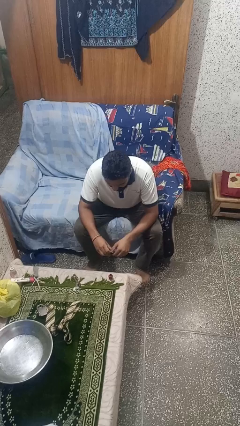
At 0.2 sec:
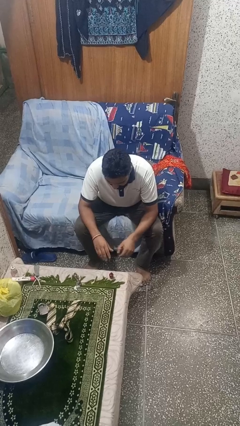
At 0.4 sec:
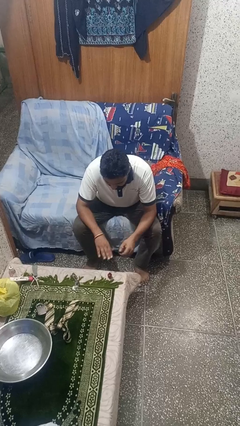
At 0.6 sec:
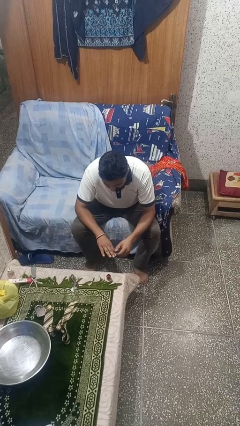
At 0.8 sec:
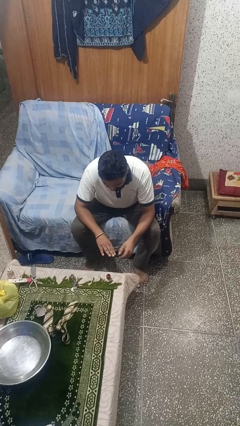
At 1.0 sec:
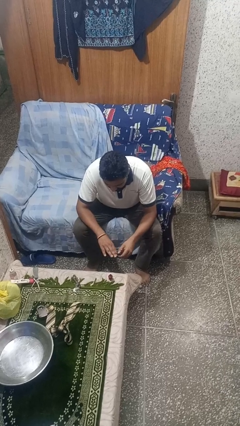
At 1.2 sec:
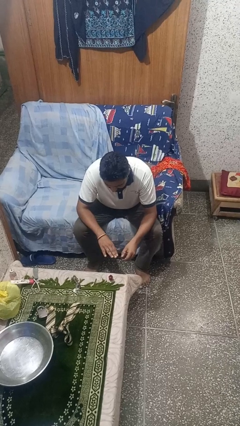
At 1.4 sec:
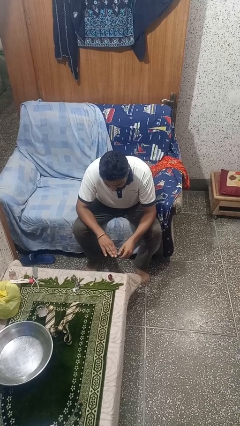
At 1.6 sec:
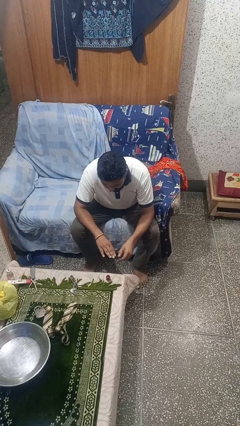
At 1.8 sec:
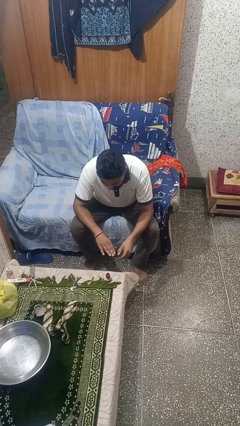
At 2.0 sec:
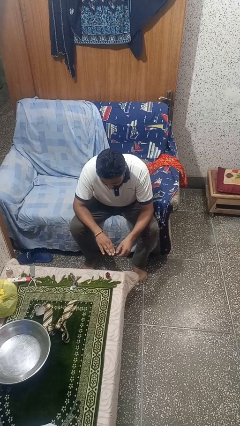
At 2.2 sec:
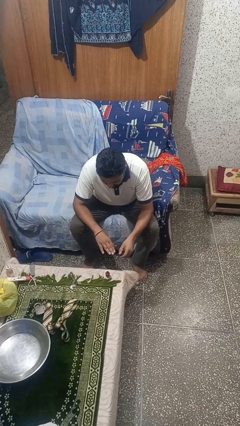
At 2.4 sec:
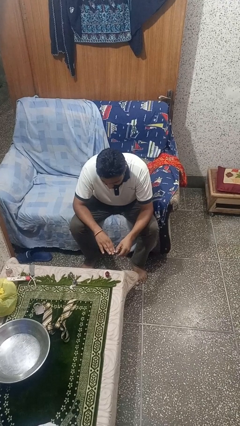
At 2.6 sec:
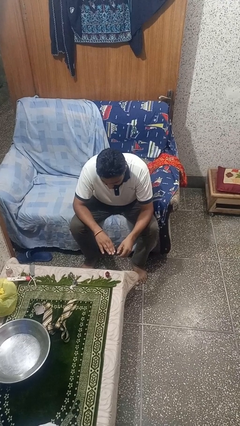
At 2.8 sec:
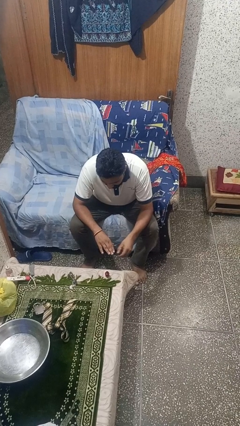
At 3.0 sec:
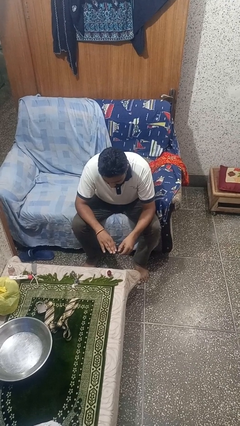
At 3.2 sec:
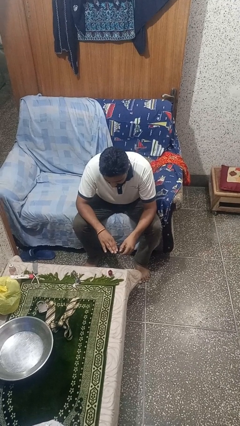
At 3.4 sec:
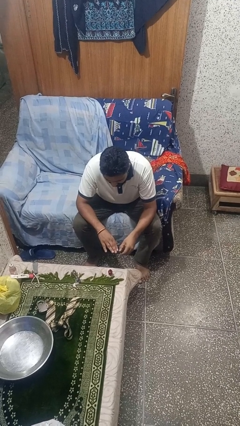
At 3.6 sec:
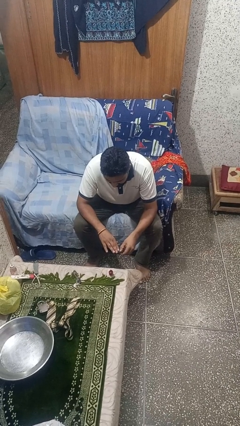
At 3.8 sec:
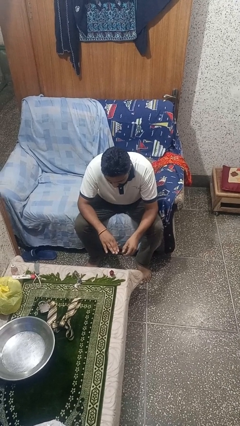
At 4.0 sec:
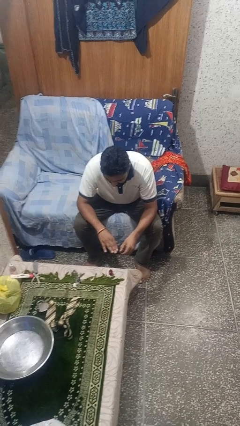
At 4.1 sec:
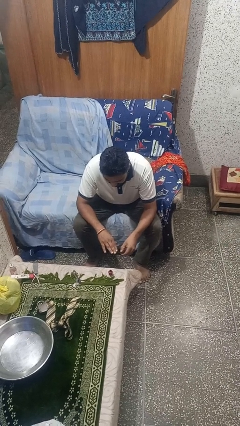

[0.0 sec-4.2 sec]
person paints fingernails

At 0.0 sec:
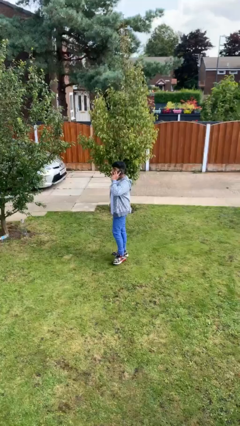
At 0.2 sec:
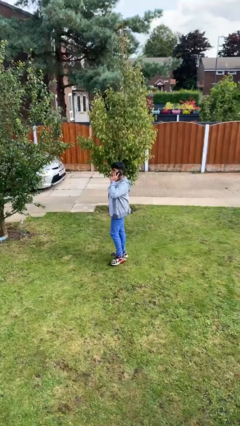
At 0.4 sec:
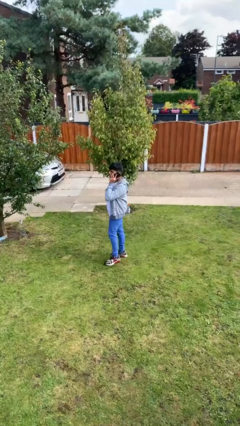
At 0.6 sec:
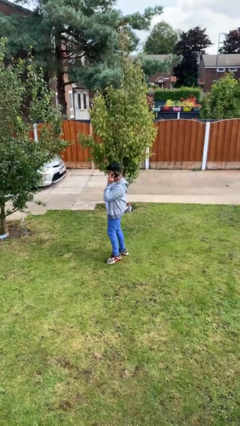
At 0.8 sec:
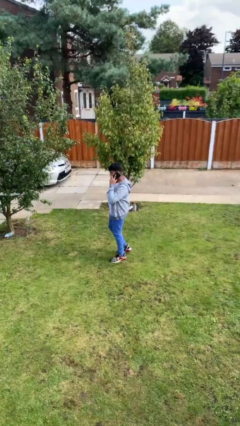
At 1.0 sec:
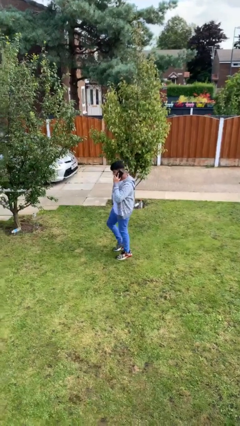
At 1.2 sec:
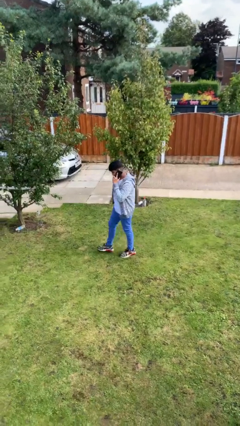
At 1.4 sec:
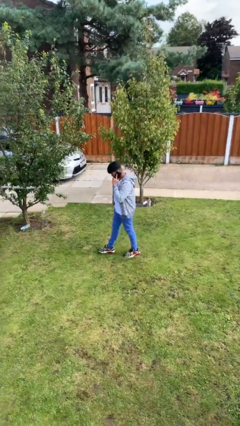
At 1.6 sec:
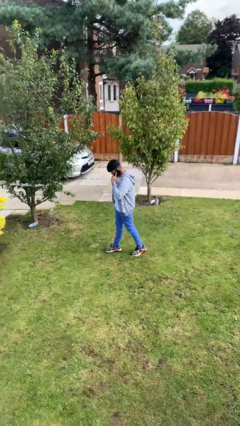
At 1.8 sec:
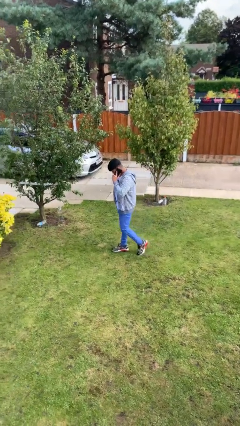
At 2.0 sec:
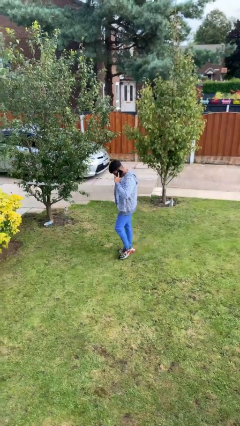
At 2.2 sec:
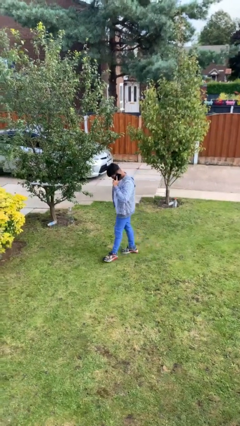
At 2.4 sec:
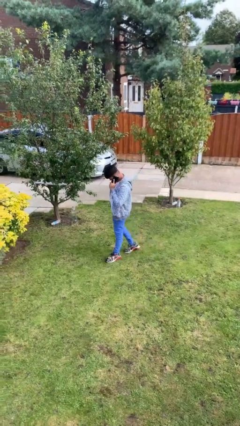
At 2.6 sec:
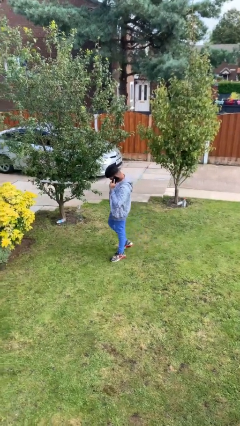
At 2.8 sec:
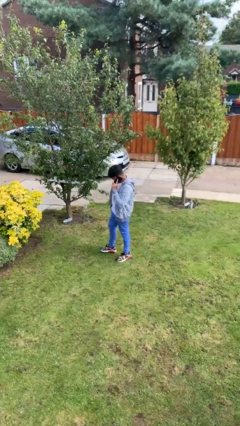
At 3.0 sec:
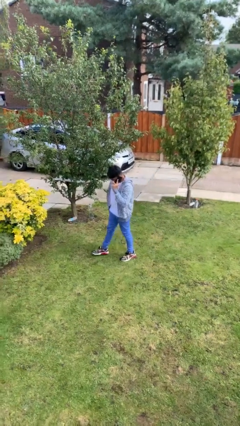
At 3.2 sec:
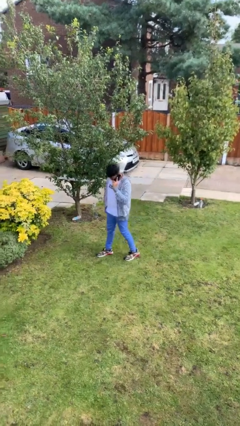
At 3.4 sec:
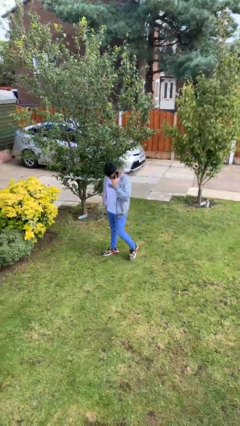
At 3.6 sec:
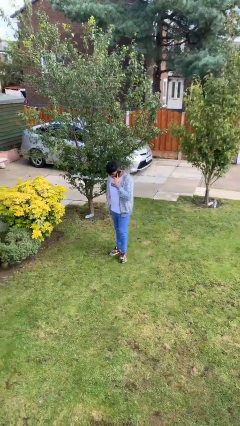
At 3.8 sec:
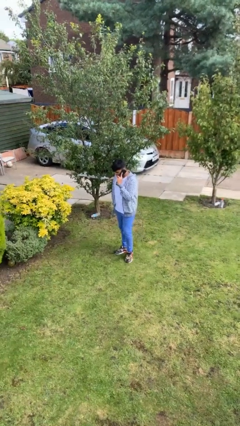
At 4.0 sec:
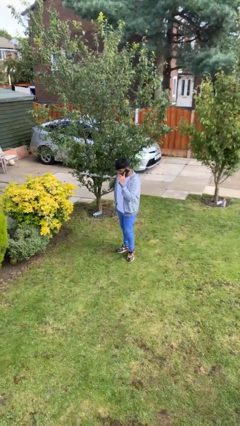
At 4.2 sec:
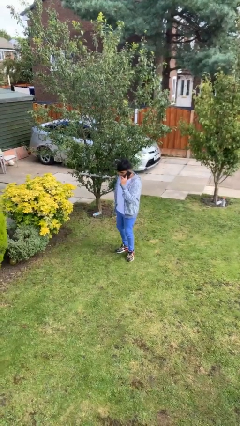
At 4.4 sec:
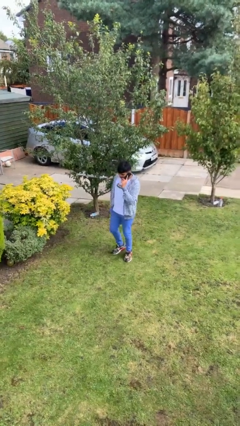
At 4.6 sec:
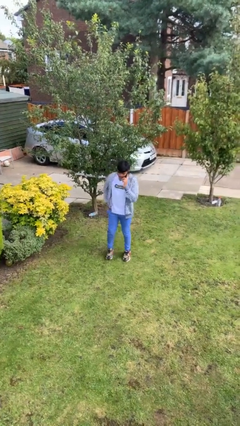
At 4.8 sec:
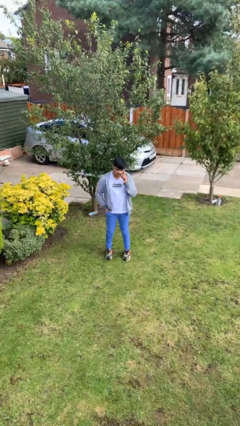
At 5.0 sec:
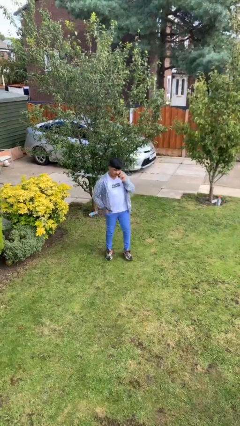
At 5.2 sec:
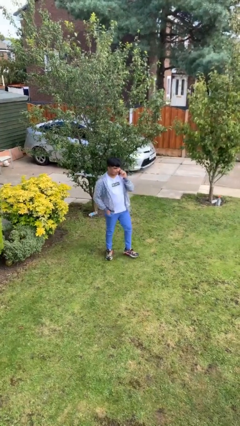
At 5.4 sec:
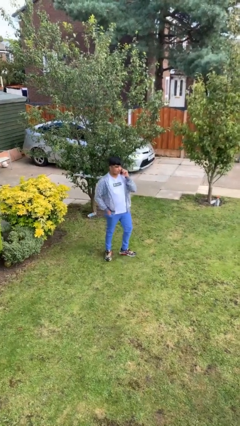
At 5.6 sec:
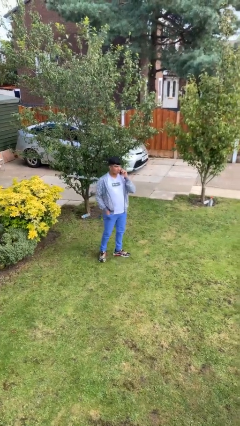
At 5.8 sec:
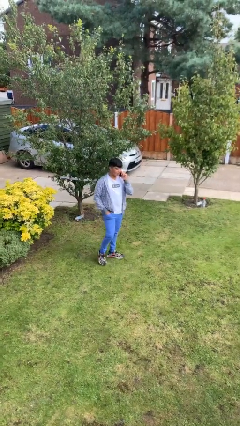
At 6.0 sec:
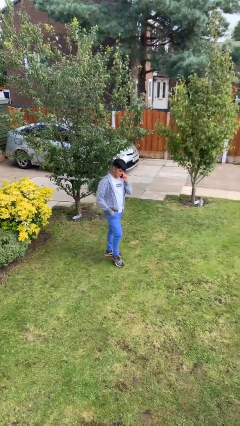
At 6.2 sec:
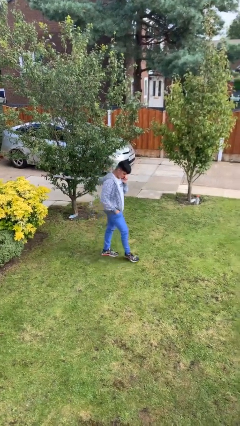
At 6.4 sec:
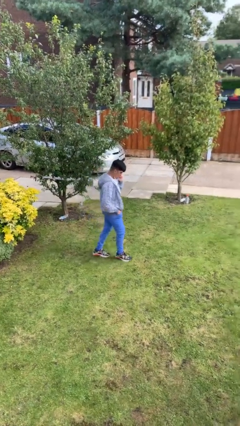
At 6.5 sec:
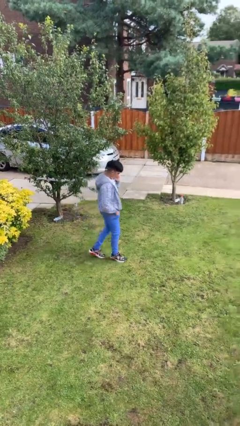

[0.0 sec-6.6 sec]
person talks on phone

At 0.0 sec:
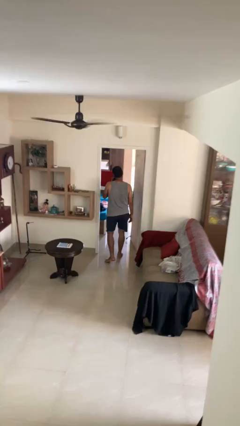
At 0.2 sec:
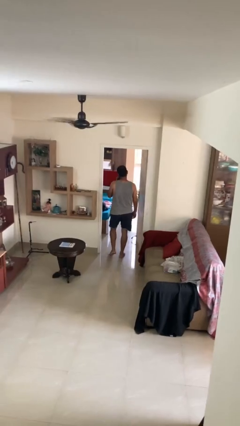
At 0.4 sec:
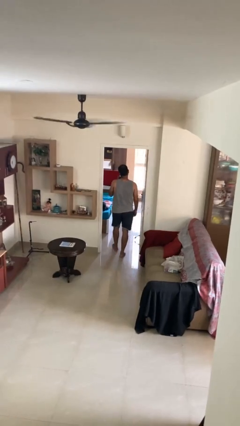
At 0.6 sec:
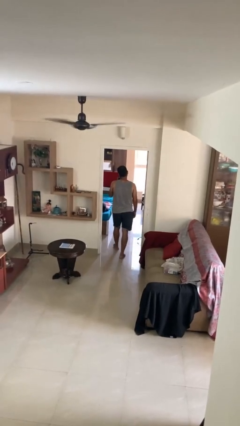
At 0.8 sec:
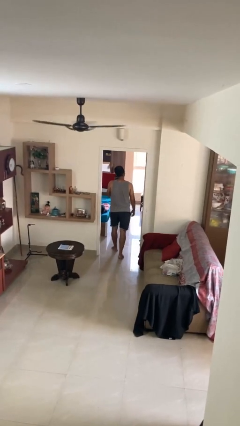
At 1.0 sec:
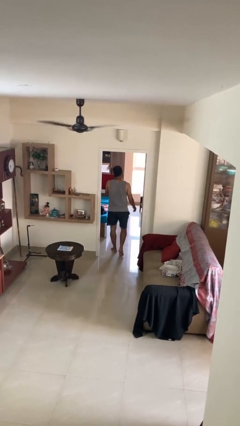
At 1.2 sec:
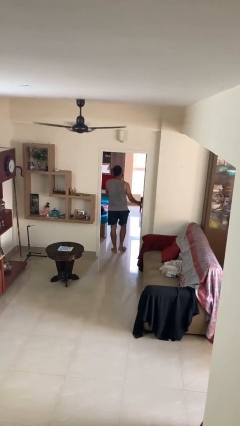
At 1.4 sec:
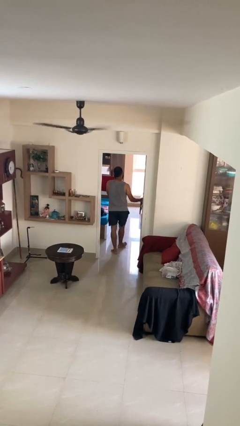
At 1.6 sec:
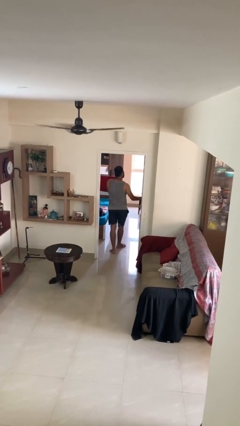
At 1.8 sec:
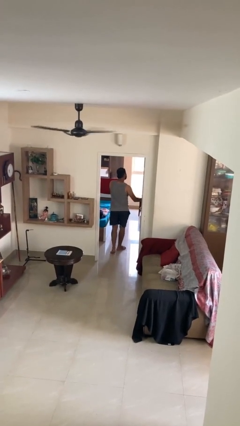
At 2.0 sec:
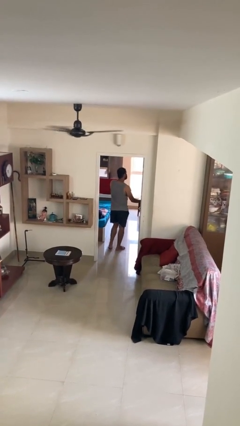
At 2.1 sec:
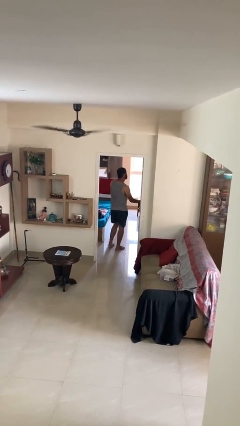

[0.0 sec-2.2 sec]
person exits scene through structure

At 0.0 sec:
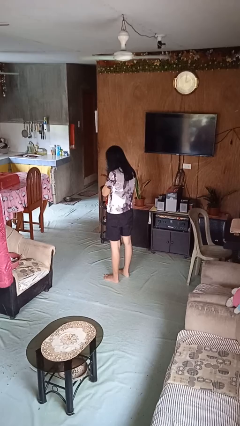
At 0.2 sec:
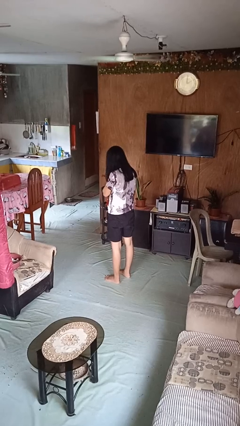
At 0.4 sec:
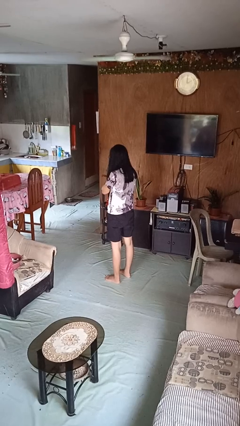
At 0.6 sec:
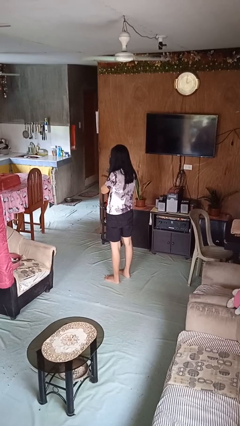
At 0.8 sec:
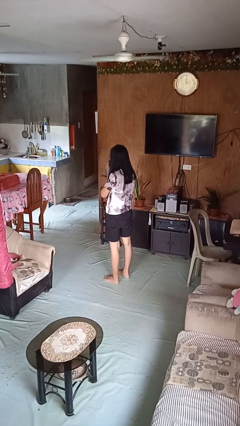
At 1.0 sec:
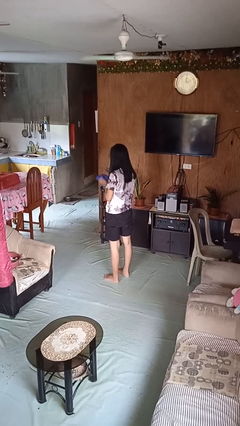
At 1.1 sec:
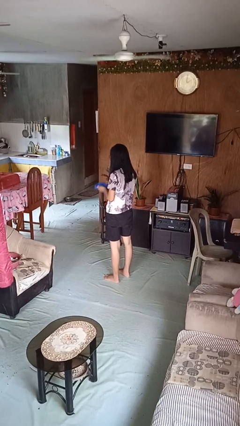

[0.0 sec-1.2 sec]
person blows nose

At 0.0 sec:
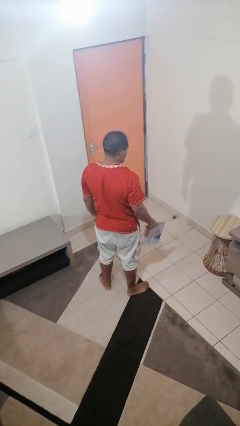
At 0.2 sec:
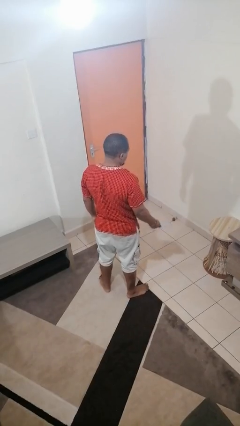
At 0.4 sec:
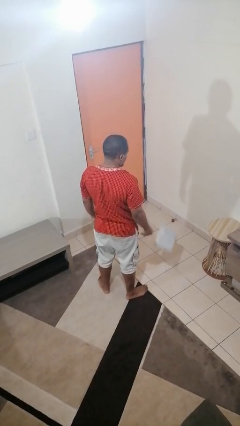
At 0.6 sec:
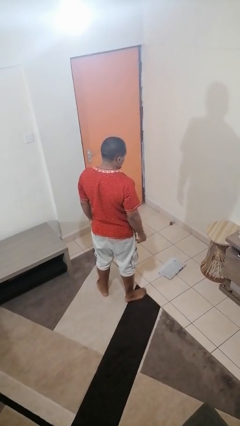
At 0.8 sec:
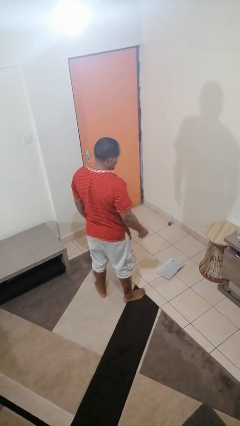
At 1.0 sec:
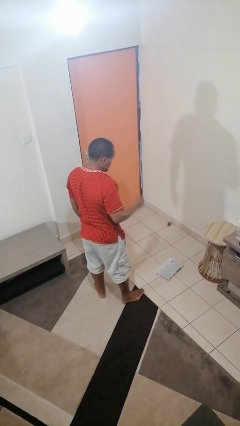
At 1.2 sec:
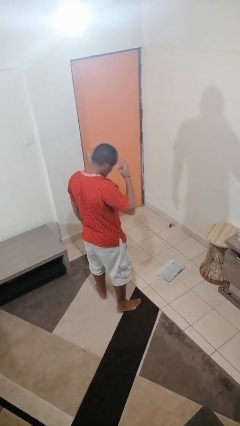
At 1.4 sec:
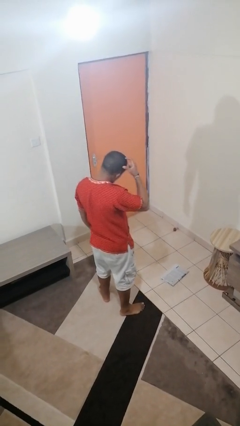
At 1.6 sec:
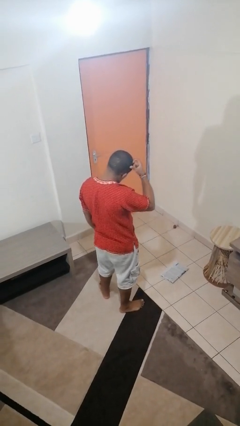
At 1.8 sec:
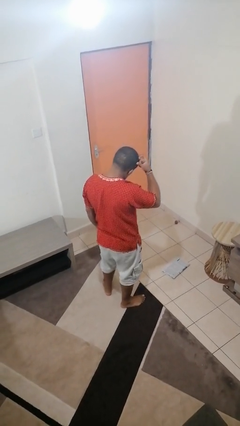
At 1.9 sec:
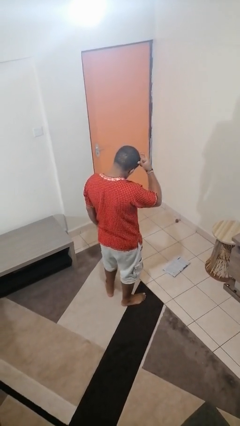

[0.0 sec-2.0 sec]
person throws object to ground

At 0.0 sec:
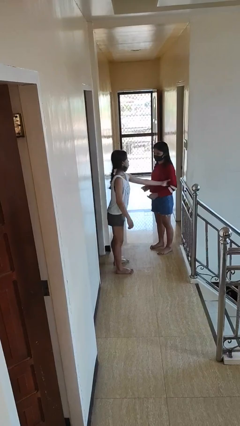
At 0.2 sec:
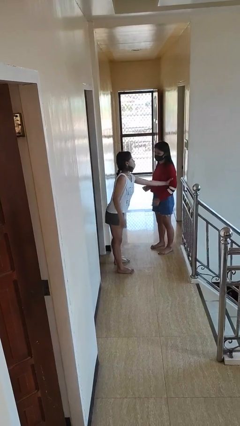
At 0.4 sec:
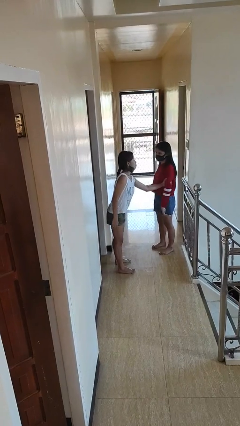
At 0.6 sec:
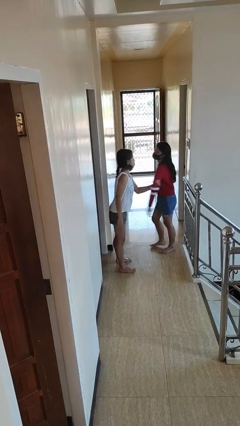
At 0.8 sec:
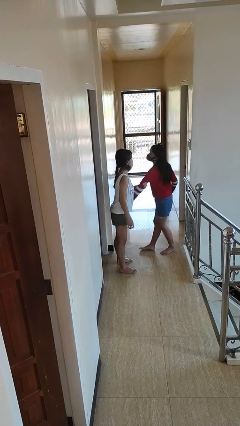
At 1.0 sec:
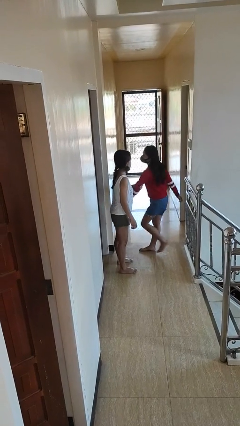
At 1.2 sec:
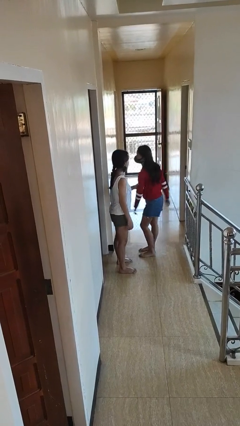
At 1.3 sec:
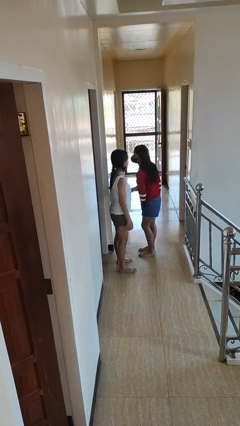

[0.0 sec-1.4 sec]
person grabs person by bicep
